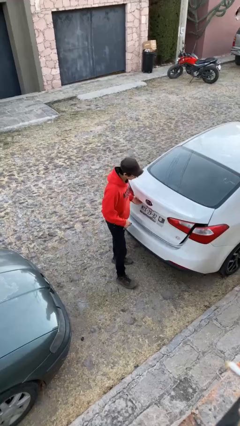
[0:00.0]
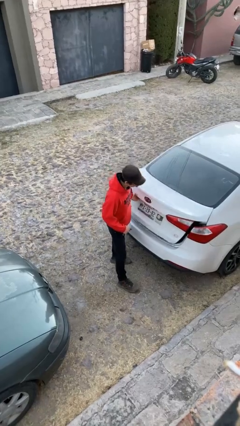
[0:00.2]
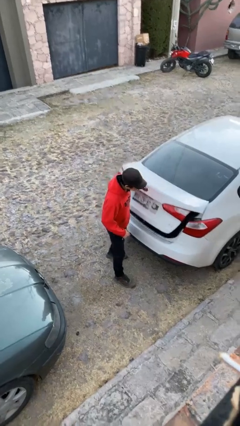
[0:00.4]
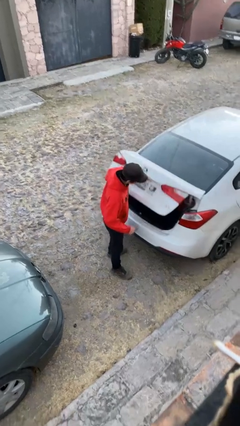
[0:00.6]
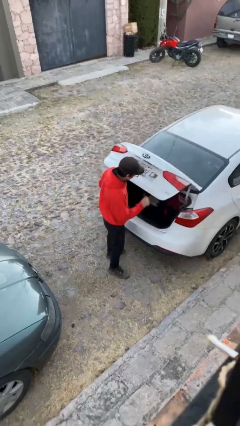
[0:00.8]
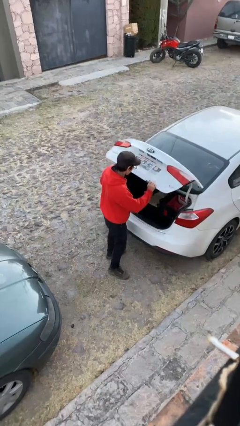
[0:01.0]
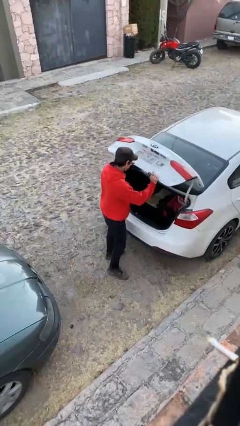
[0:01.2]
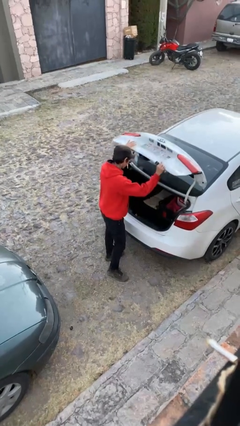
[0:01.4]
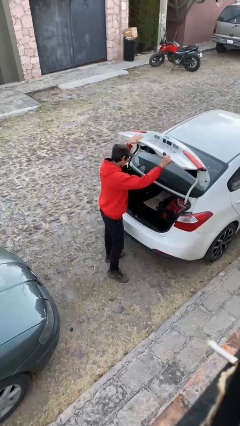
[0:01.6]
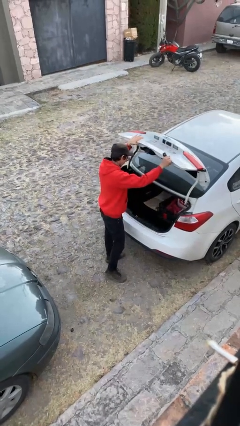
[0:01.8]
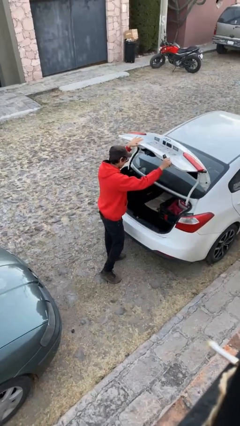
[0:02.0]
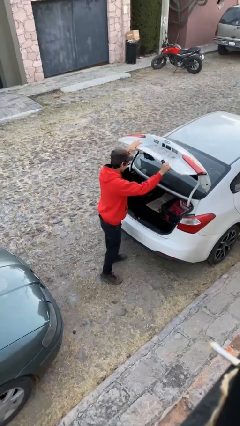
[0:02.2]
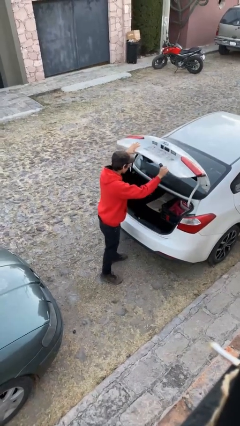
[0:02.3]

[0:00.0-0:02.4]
person opens car trunk

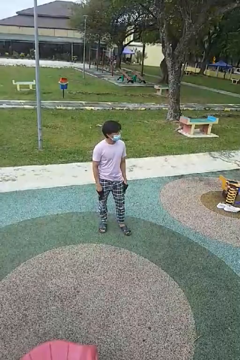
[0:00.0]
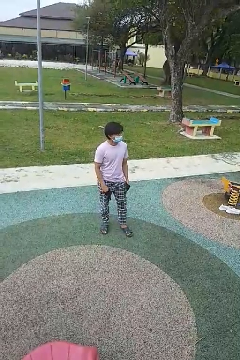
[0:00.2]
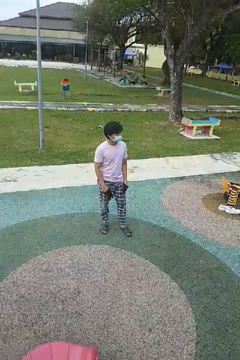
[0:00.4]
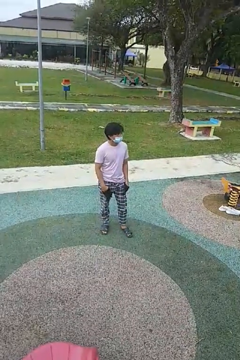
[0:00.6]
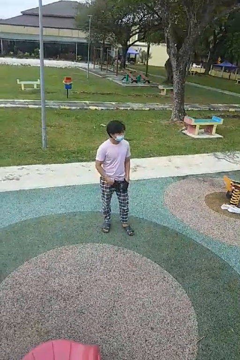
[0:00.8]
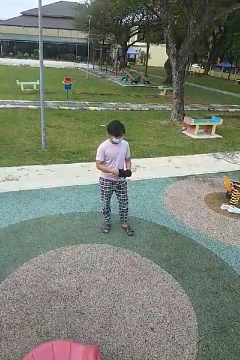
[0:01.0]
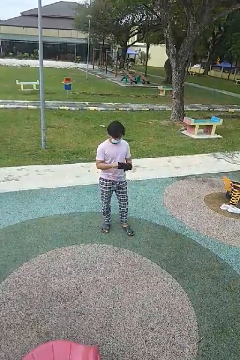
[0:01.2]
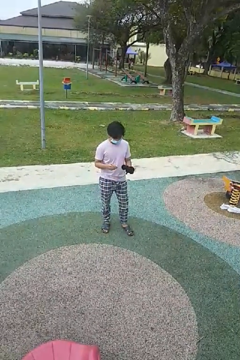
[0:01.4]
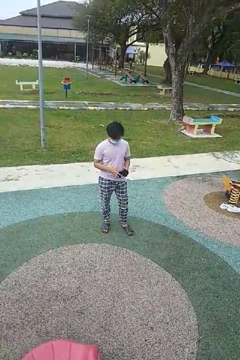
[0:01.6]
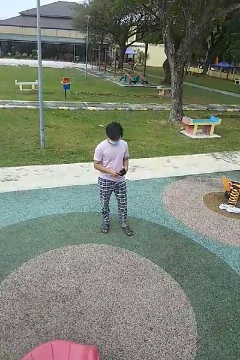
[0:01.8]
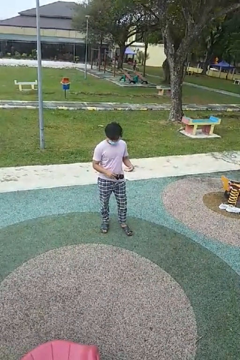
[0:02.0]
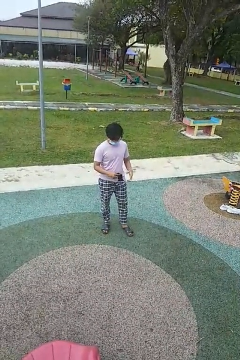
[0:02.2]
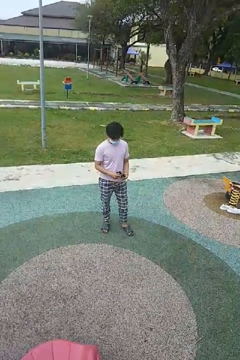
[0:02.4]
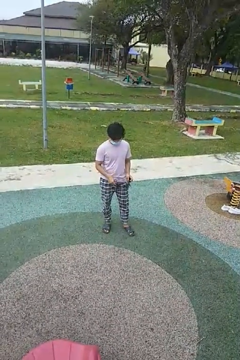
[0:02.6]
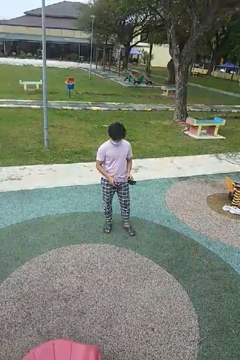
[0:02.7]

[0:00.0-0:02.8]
person takes off gloves

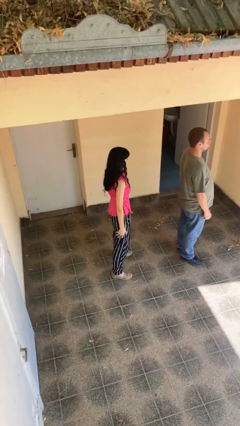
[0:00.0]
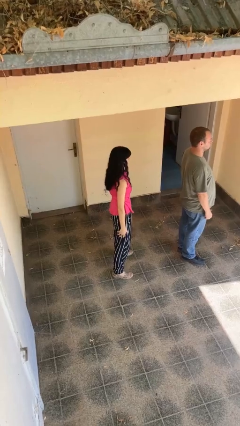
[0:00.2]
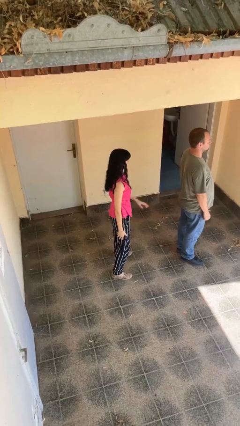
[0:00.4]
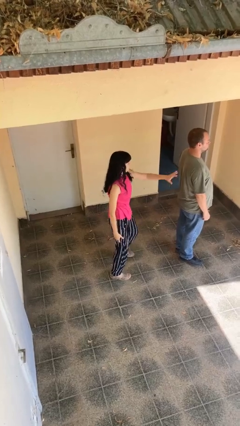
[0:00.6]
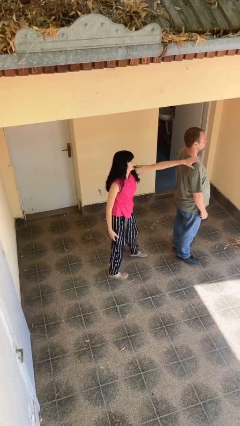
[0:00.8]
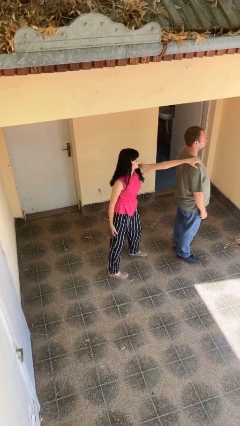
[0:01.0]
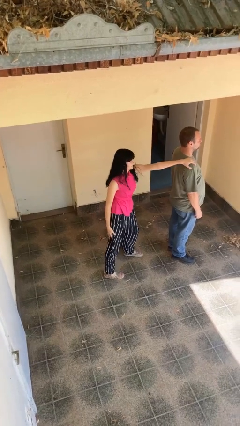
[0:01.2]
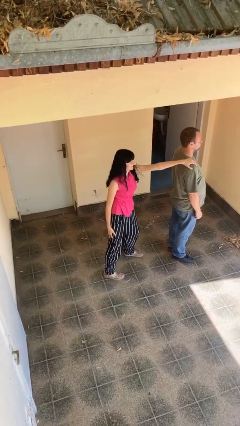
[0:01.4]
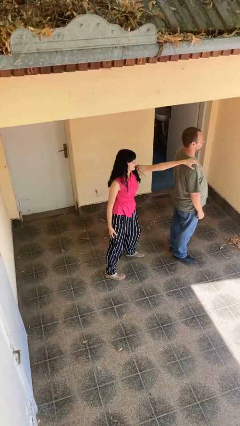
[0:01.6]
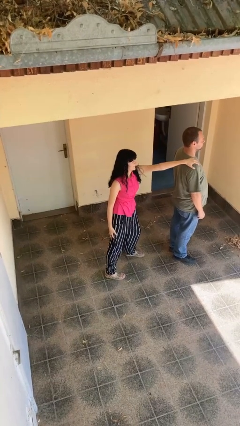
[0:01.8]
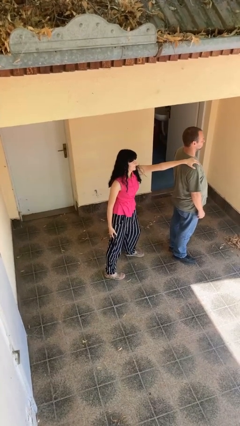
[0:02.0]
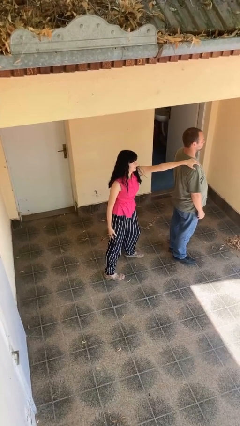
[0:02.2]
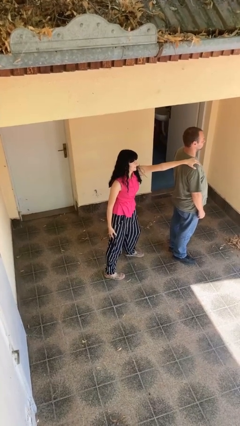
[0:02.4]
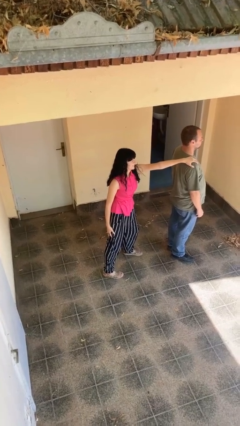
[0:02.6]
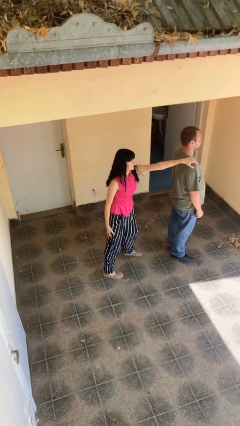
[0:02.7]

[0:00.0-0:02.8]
person grabs person by shoulder

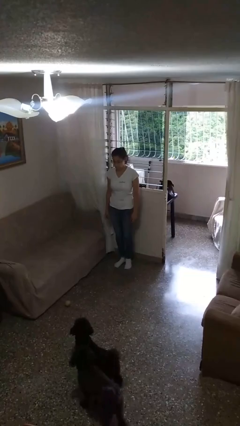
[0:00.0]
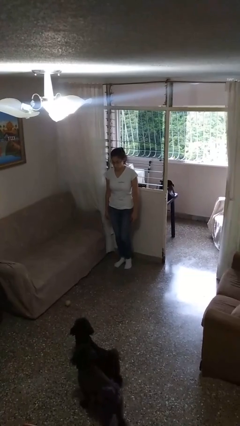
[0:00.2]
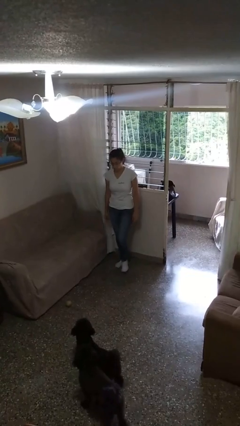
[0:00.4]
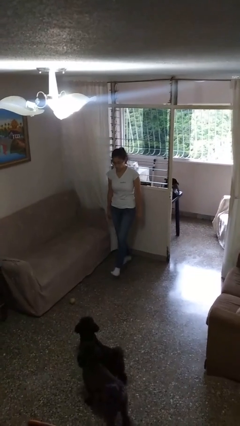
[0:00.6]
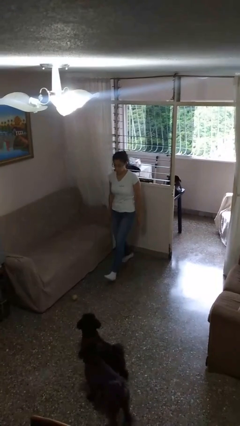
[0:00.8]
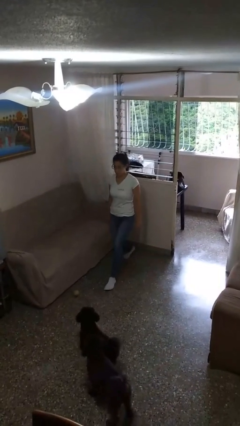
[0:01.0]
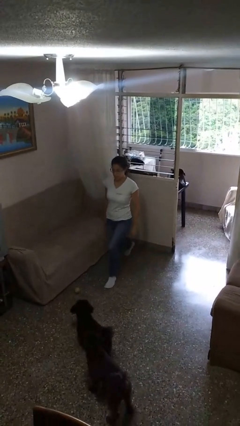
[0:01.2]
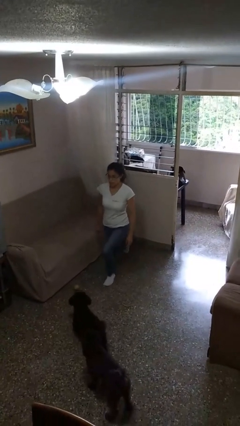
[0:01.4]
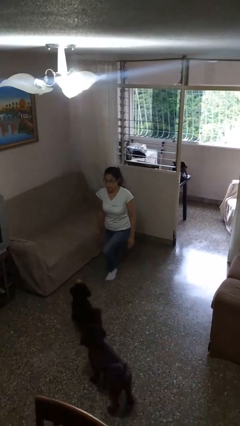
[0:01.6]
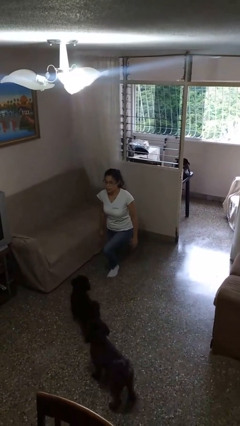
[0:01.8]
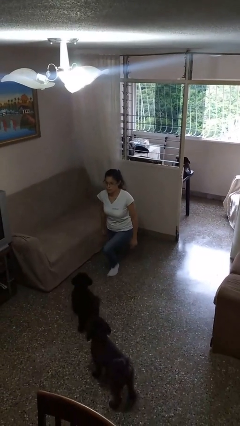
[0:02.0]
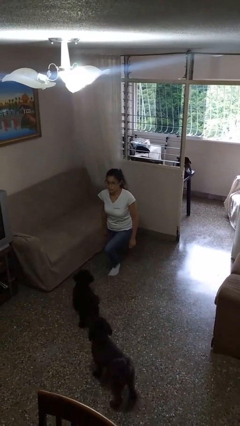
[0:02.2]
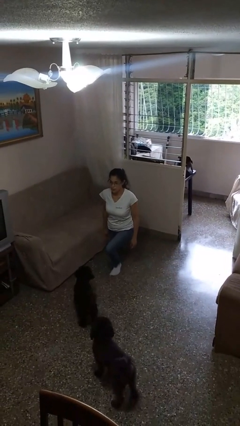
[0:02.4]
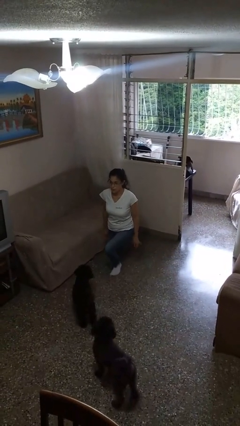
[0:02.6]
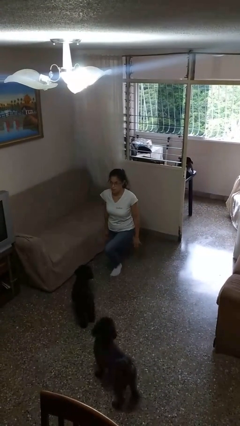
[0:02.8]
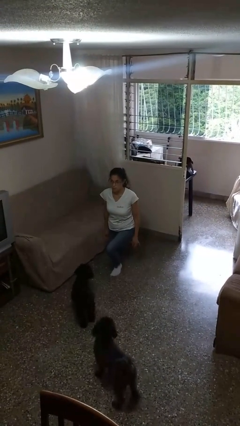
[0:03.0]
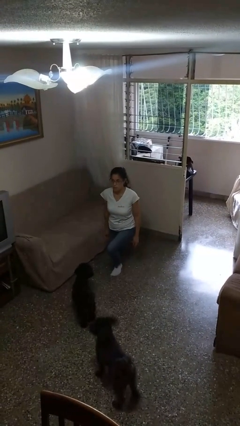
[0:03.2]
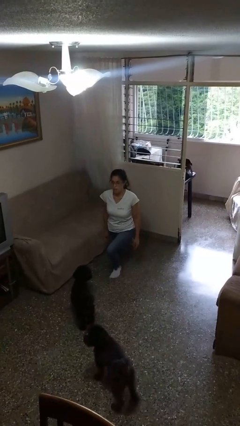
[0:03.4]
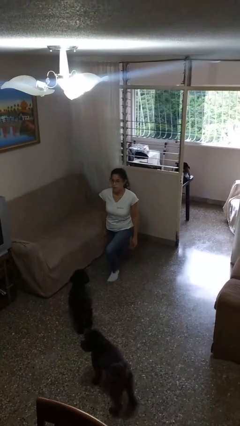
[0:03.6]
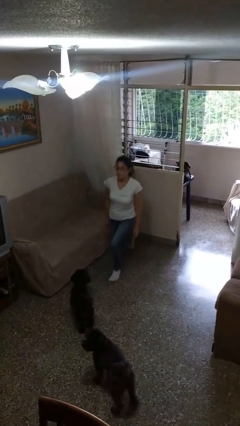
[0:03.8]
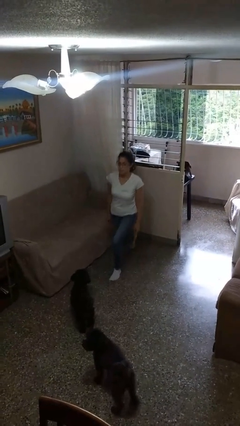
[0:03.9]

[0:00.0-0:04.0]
person exercises with lunges

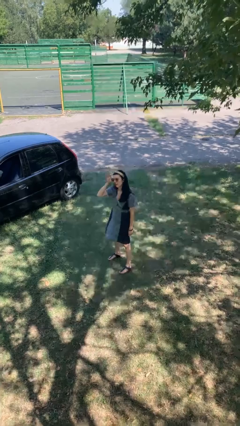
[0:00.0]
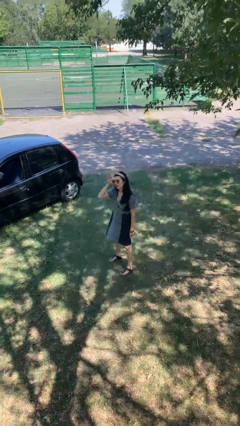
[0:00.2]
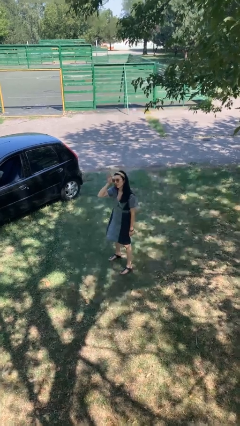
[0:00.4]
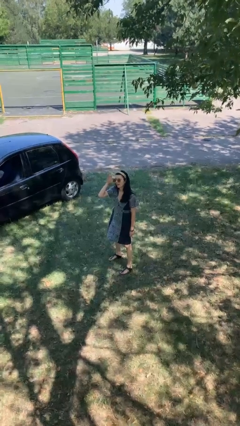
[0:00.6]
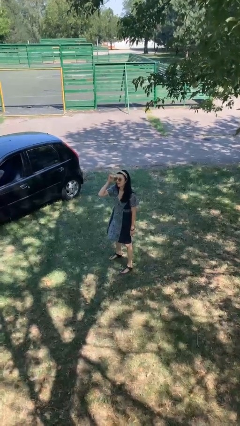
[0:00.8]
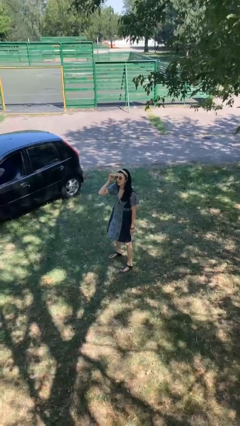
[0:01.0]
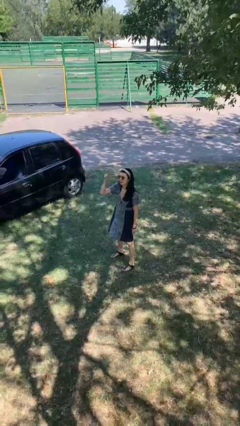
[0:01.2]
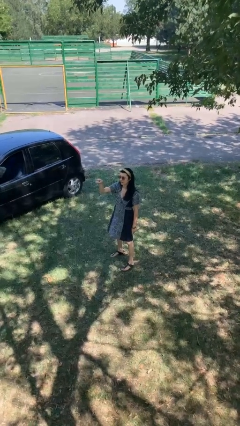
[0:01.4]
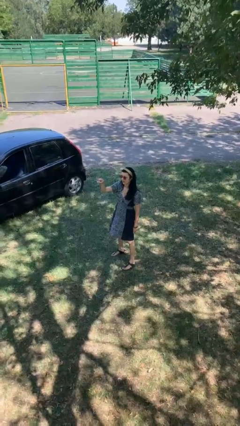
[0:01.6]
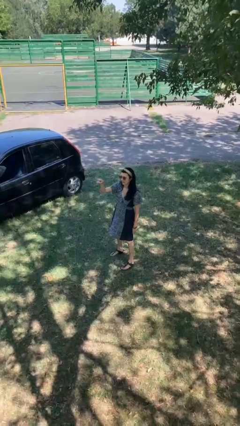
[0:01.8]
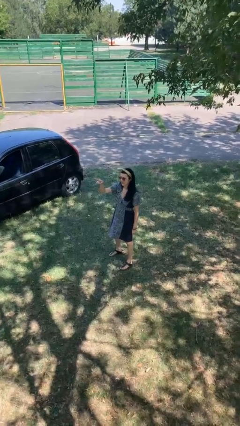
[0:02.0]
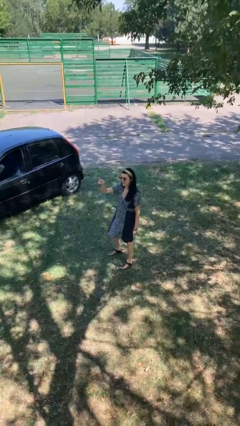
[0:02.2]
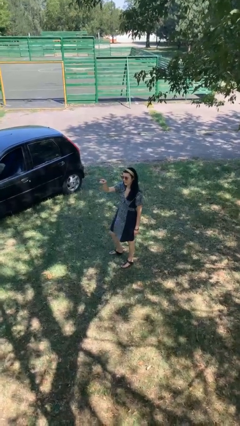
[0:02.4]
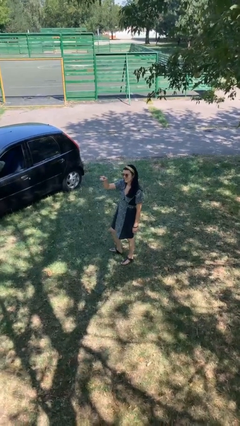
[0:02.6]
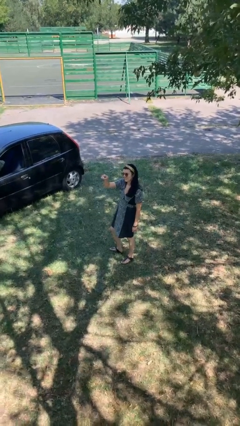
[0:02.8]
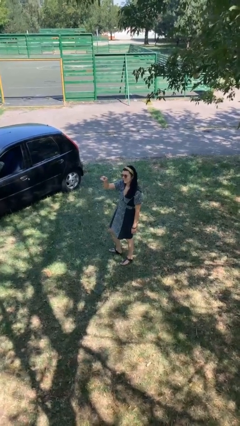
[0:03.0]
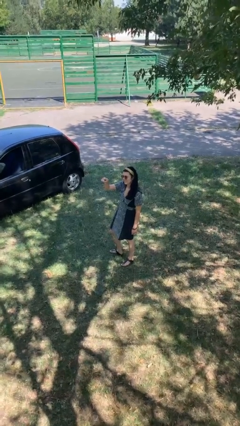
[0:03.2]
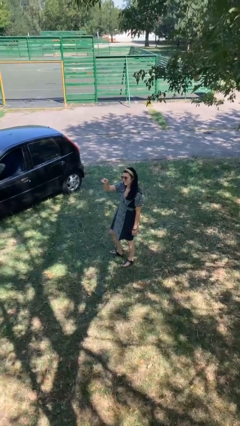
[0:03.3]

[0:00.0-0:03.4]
person points at person

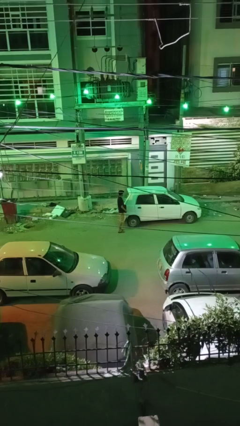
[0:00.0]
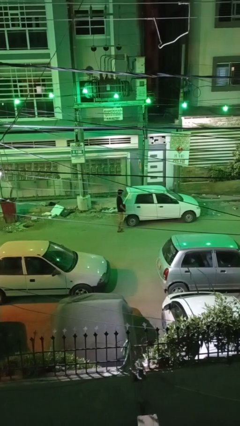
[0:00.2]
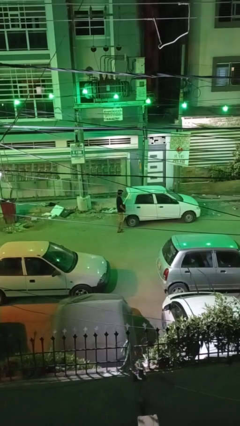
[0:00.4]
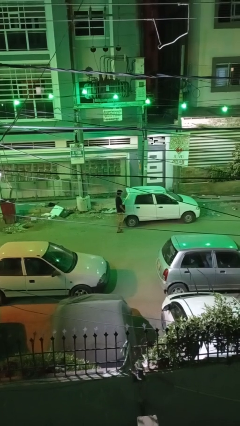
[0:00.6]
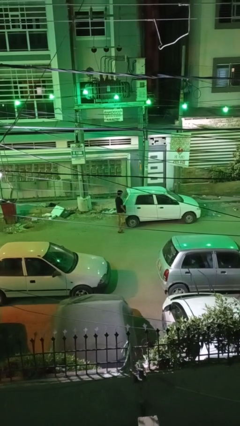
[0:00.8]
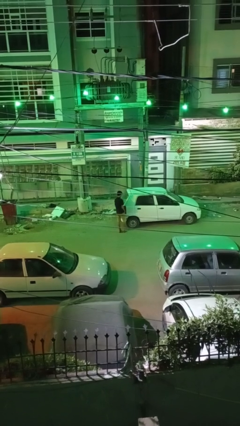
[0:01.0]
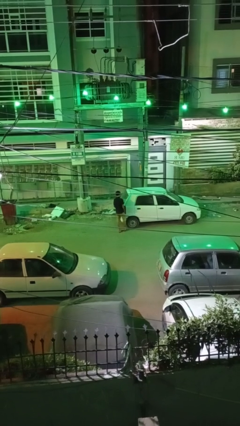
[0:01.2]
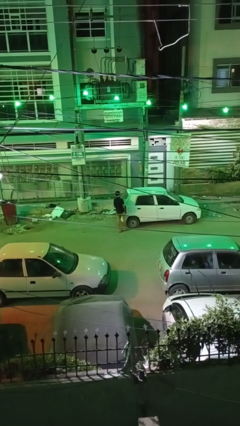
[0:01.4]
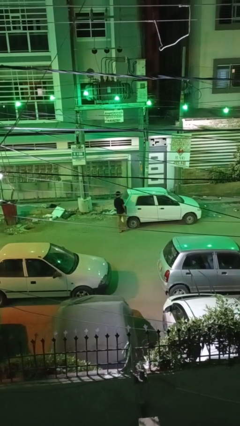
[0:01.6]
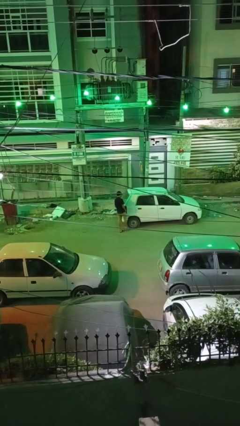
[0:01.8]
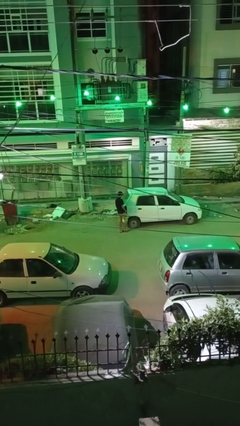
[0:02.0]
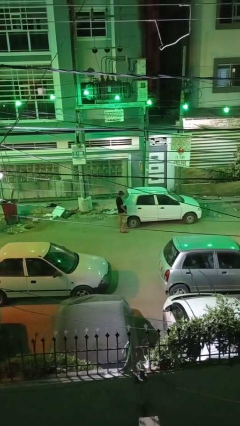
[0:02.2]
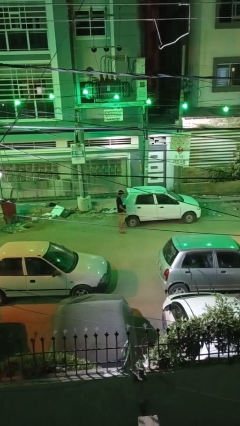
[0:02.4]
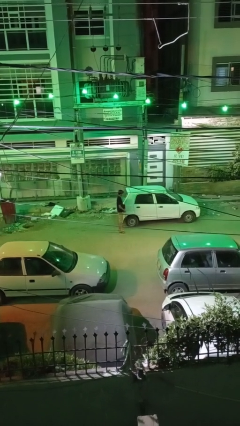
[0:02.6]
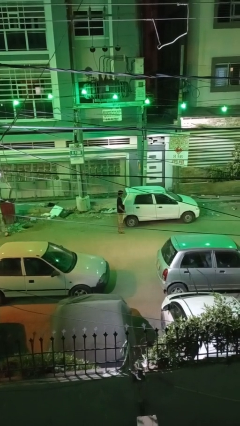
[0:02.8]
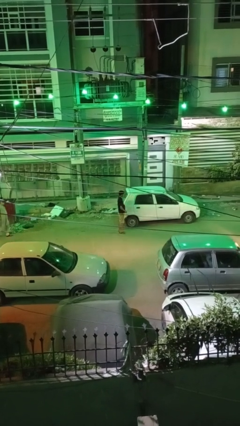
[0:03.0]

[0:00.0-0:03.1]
person kicks car tires
